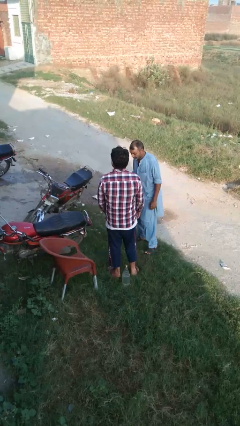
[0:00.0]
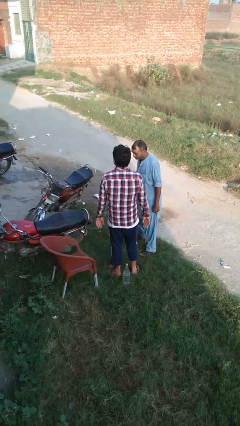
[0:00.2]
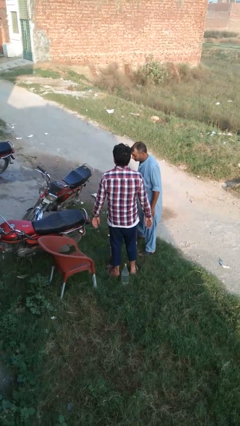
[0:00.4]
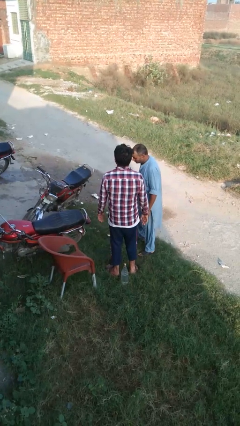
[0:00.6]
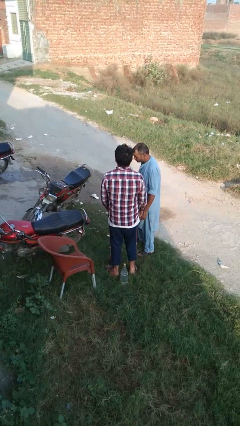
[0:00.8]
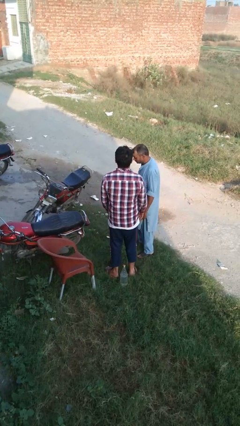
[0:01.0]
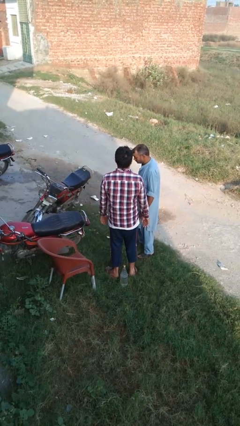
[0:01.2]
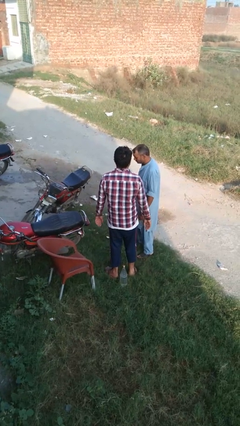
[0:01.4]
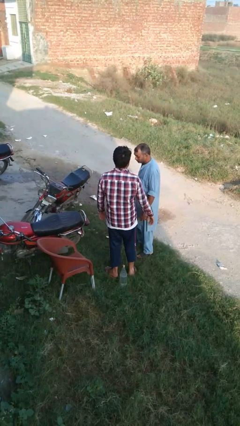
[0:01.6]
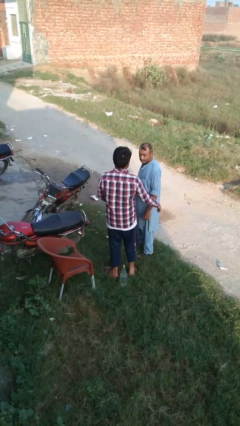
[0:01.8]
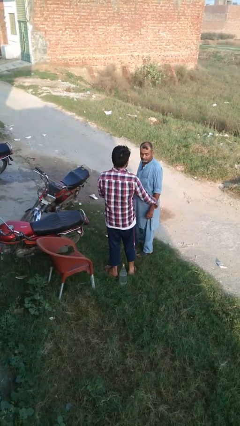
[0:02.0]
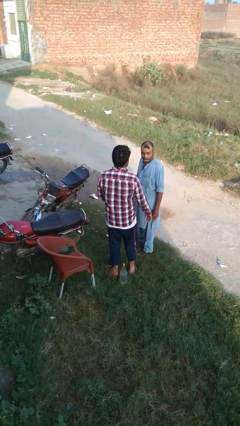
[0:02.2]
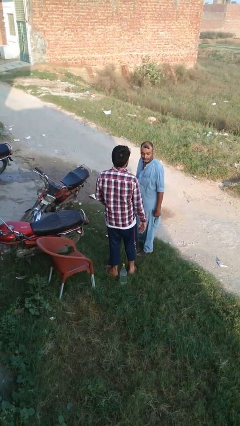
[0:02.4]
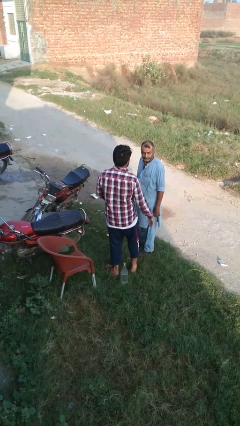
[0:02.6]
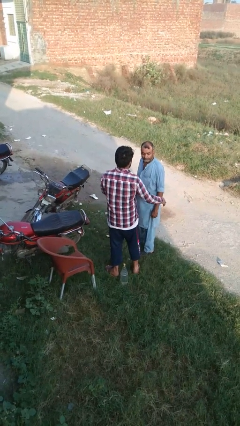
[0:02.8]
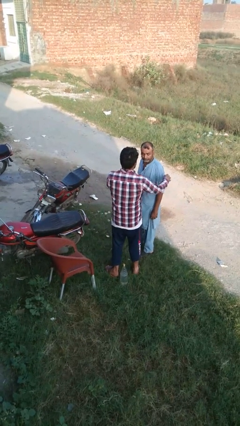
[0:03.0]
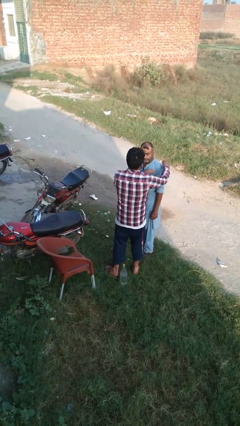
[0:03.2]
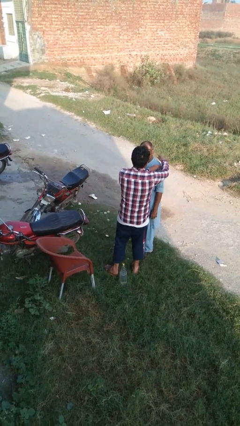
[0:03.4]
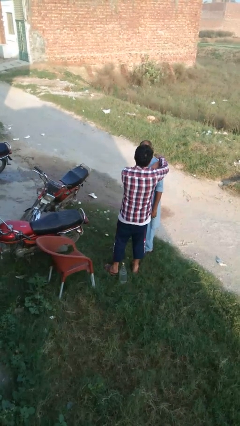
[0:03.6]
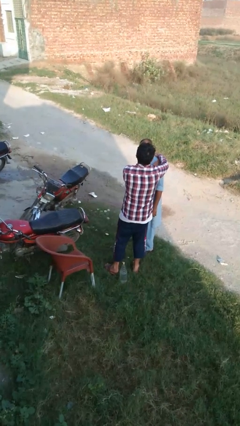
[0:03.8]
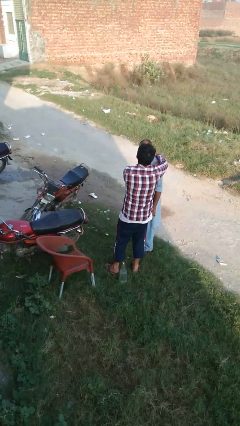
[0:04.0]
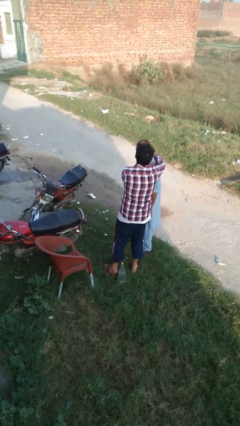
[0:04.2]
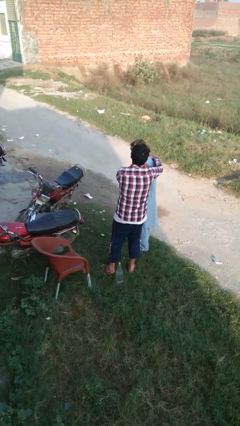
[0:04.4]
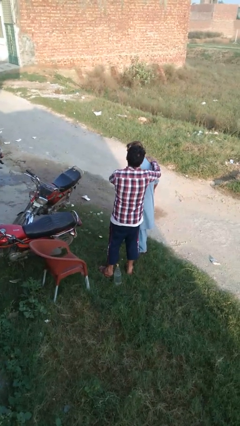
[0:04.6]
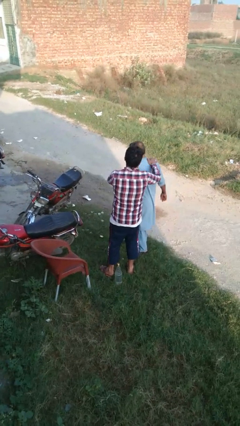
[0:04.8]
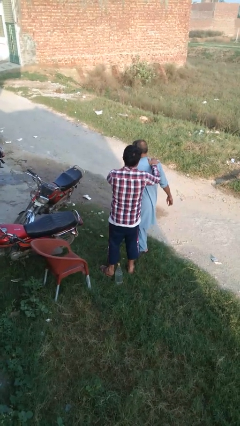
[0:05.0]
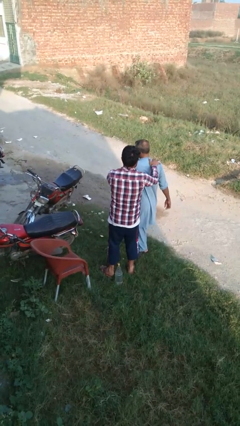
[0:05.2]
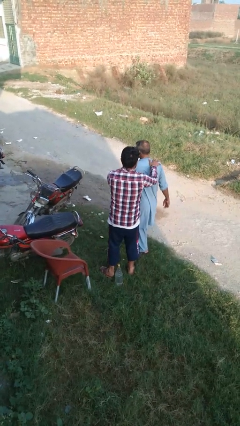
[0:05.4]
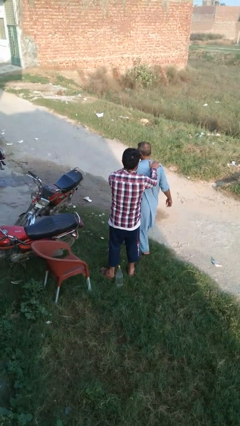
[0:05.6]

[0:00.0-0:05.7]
person grabs person by shoulder

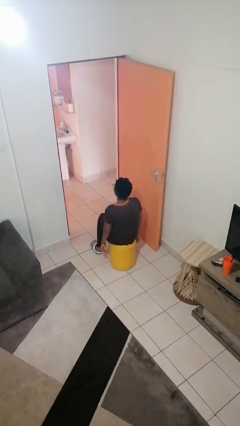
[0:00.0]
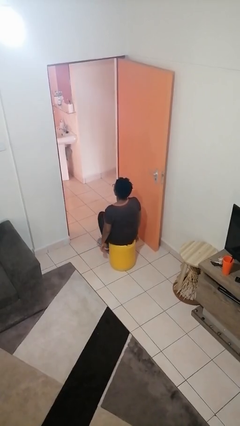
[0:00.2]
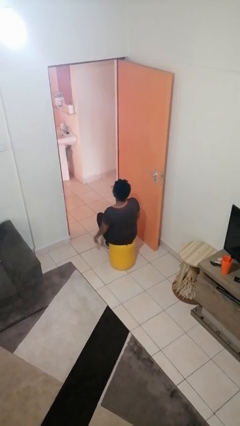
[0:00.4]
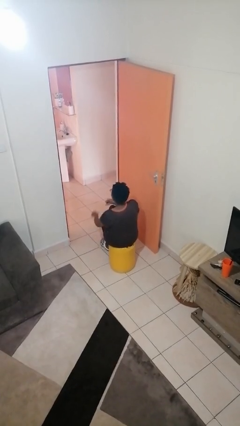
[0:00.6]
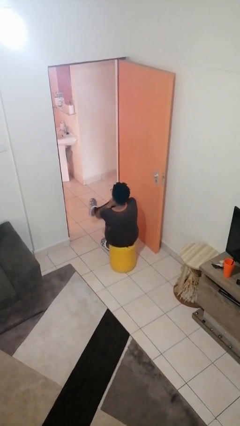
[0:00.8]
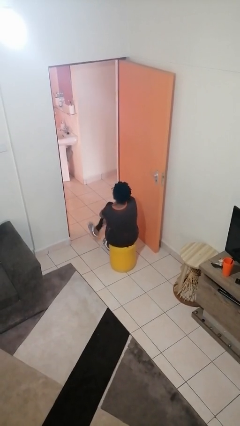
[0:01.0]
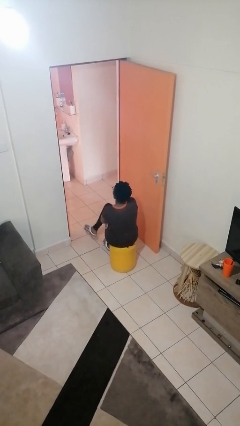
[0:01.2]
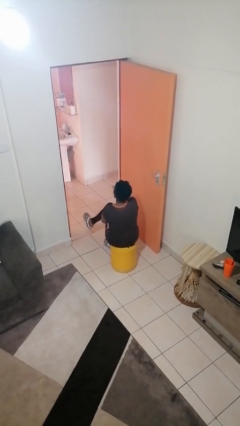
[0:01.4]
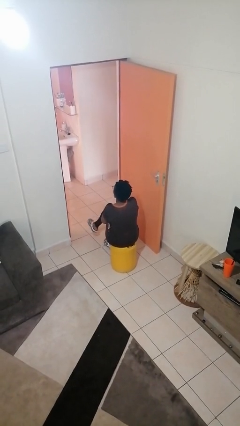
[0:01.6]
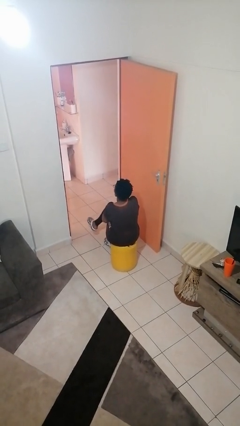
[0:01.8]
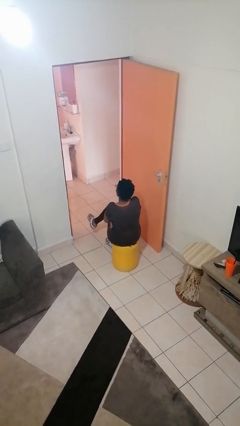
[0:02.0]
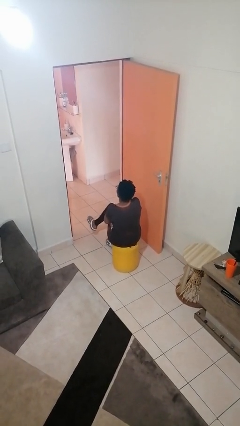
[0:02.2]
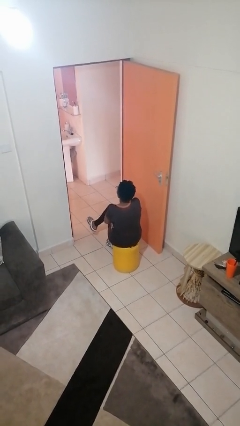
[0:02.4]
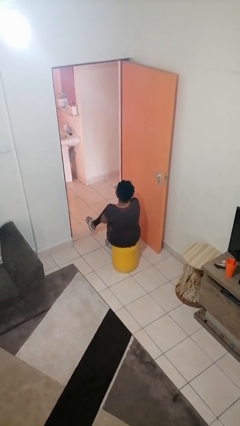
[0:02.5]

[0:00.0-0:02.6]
person crosses arms

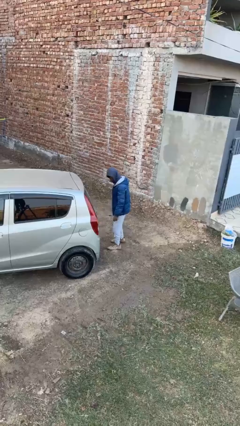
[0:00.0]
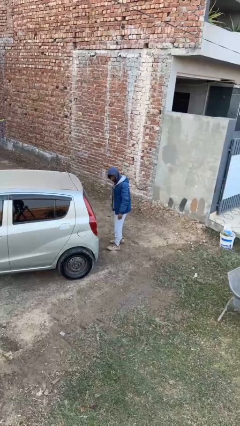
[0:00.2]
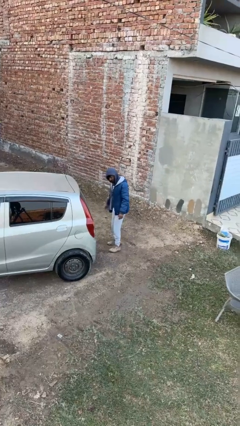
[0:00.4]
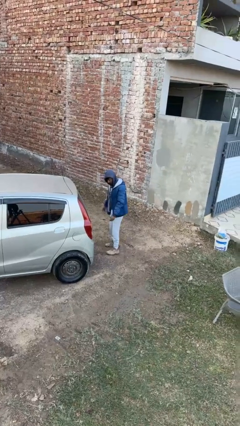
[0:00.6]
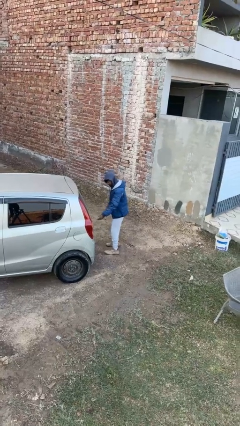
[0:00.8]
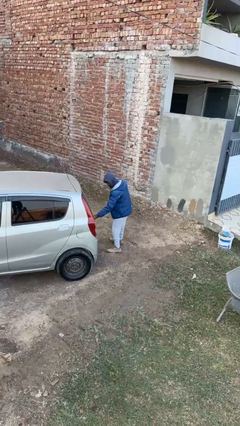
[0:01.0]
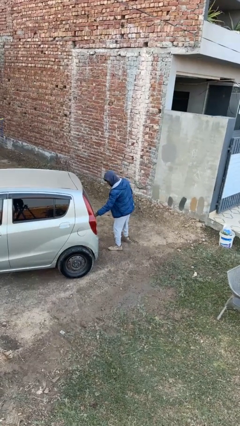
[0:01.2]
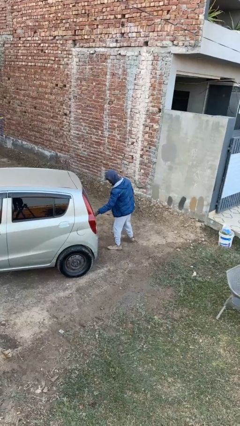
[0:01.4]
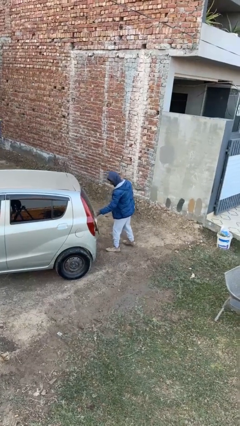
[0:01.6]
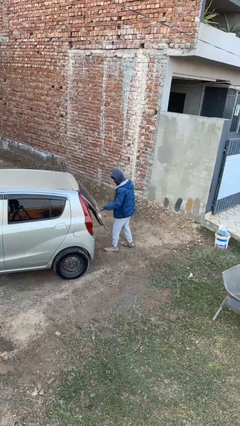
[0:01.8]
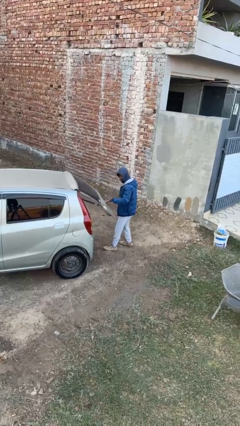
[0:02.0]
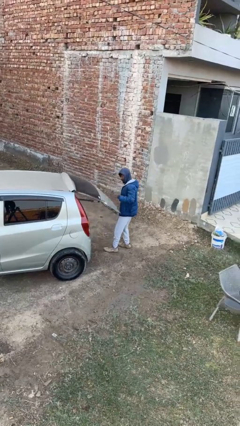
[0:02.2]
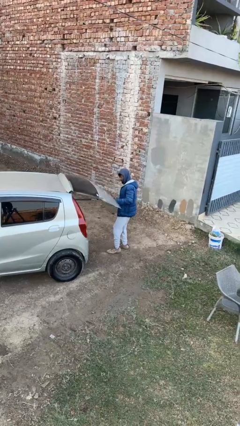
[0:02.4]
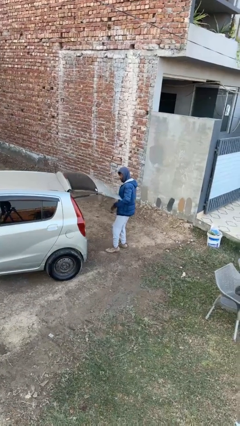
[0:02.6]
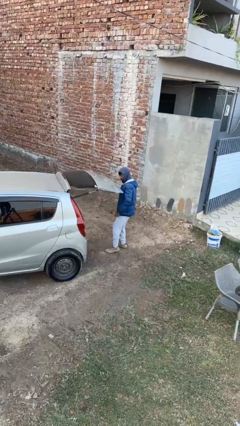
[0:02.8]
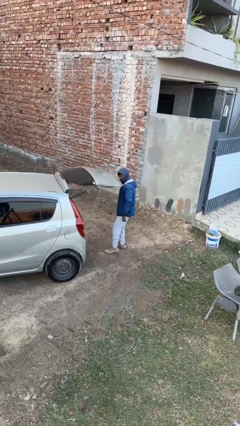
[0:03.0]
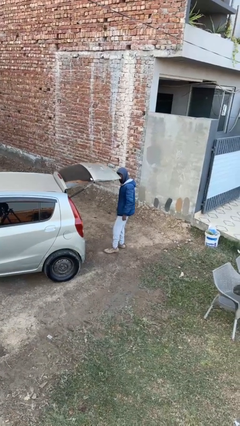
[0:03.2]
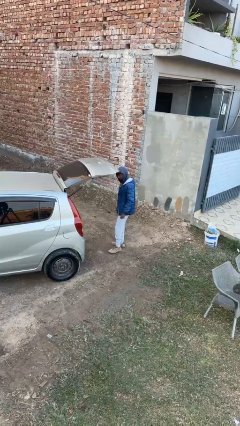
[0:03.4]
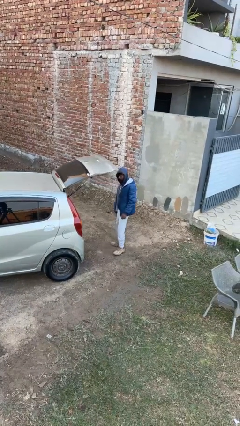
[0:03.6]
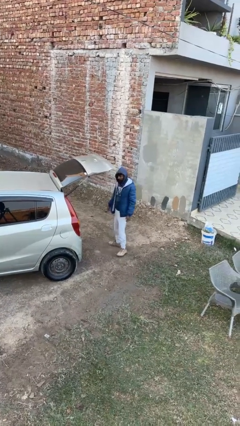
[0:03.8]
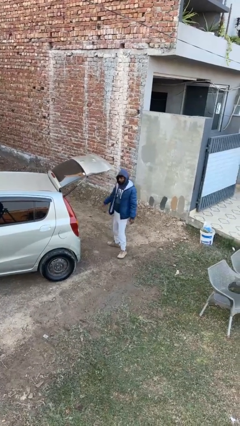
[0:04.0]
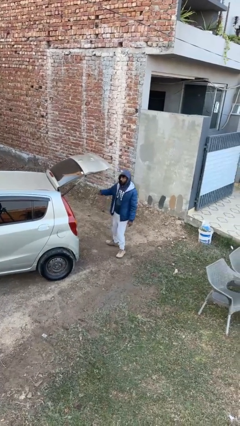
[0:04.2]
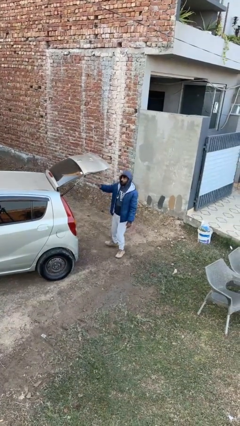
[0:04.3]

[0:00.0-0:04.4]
person opens car trunk

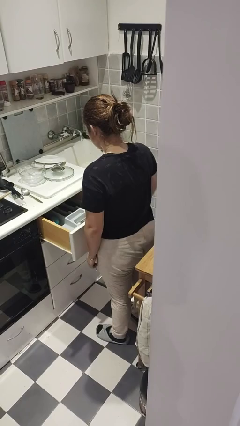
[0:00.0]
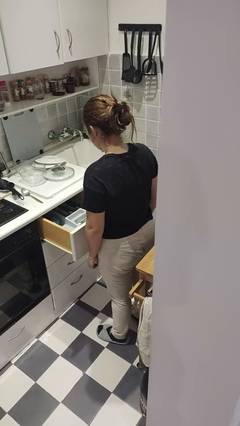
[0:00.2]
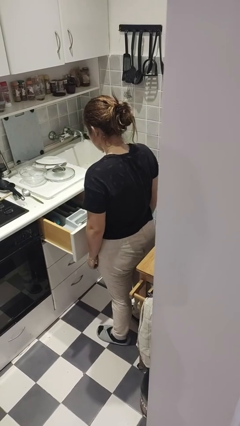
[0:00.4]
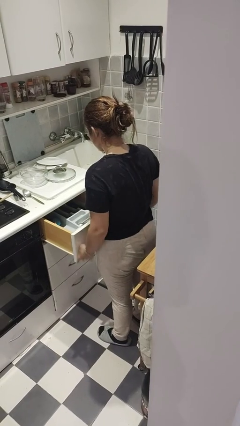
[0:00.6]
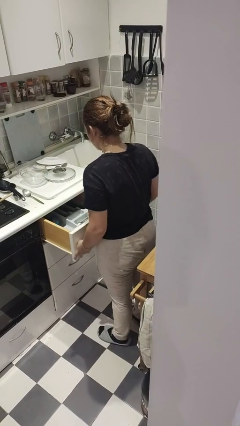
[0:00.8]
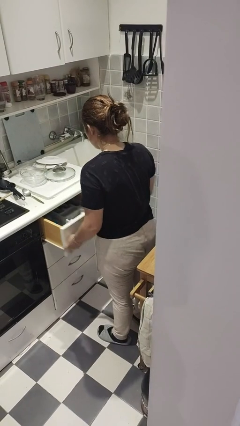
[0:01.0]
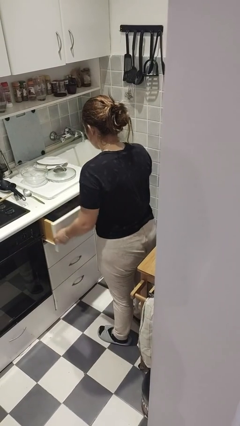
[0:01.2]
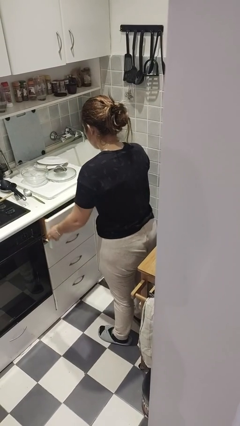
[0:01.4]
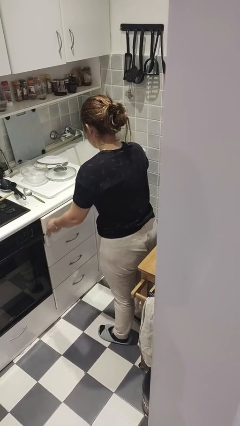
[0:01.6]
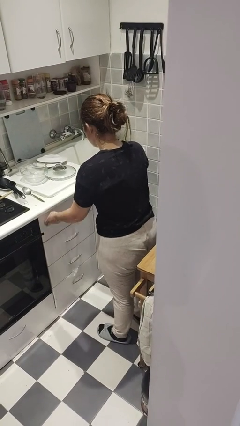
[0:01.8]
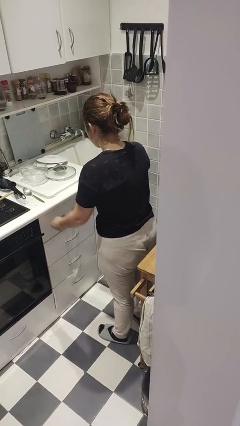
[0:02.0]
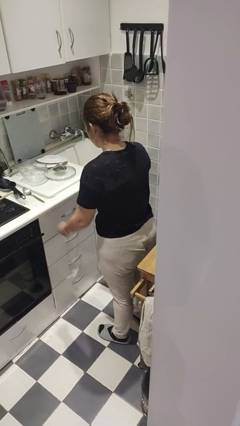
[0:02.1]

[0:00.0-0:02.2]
person closes kitchen drawer

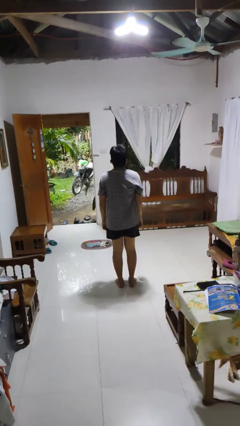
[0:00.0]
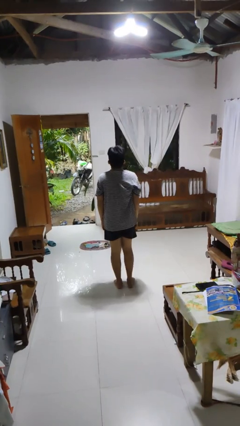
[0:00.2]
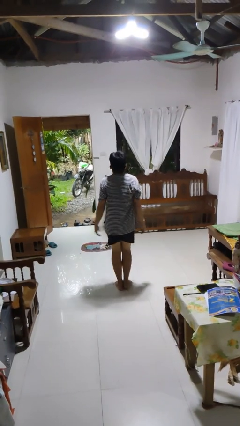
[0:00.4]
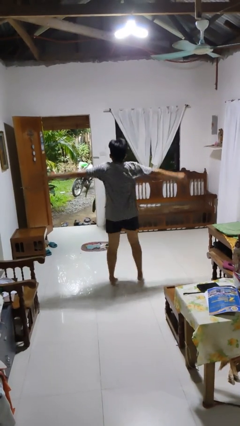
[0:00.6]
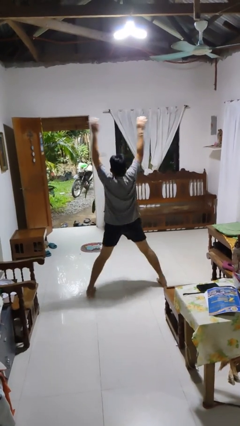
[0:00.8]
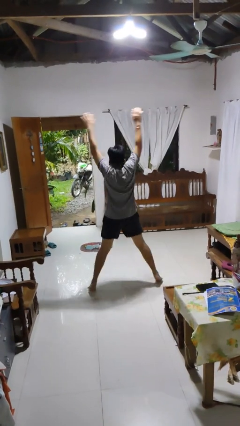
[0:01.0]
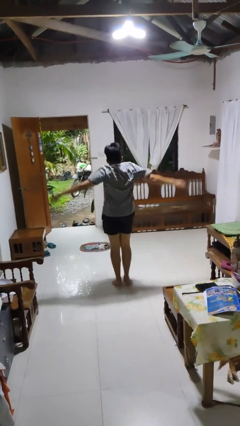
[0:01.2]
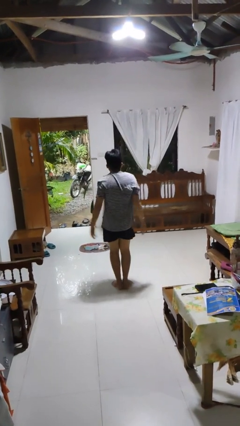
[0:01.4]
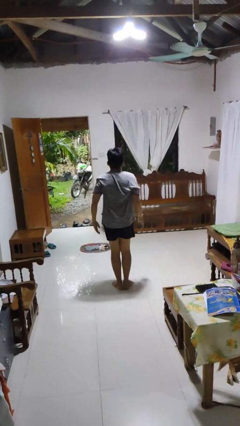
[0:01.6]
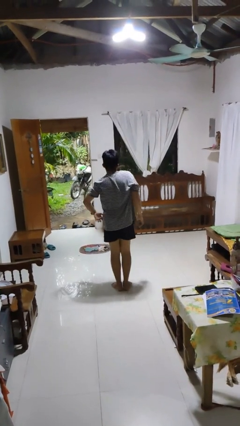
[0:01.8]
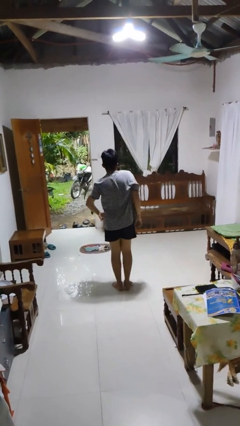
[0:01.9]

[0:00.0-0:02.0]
person exercises with jumping jacks

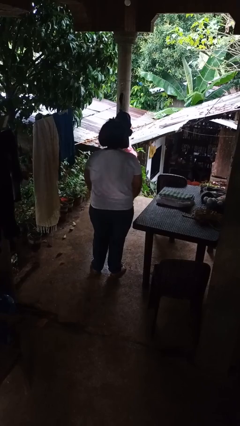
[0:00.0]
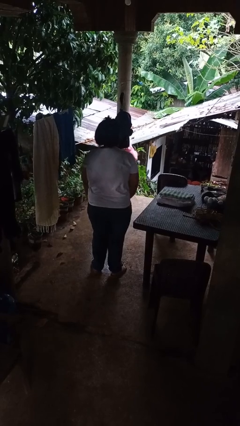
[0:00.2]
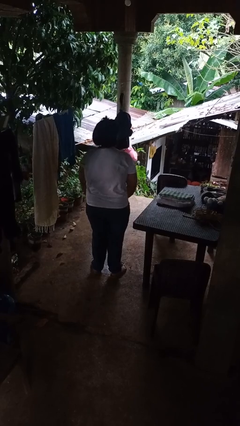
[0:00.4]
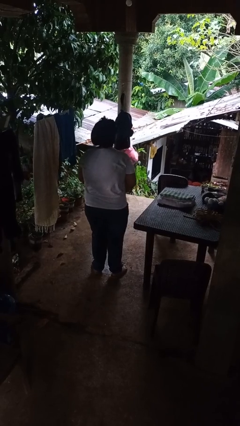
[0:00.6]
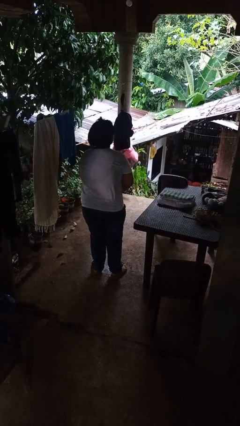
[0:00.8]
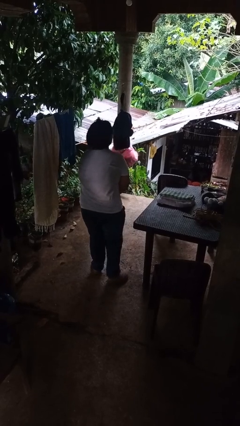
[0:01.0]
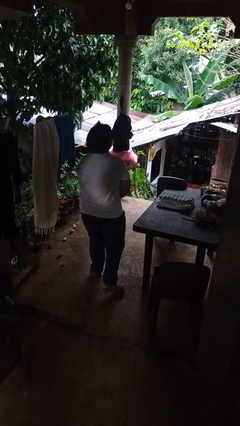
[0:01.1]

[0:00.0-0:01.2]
person bumps into table
